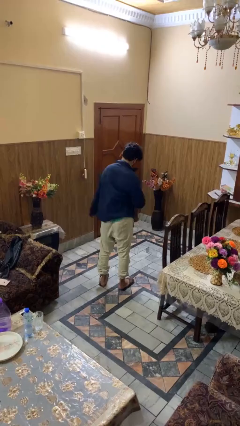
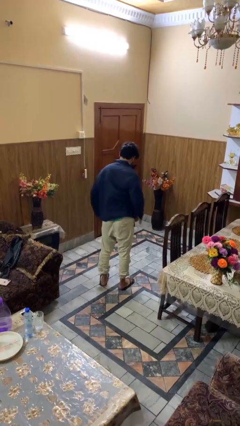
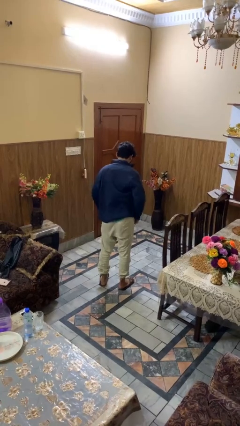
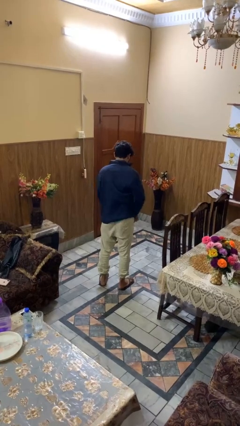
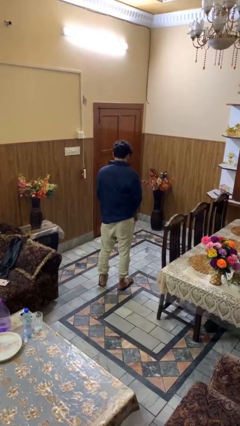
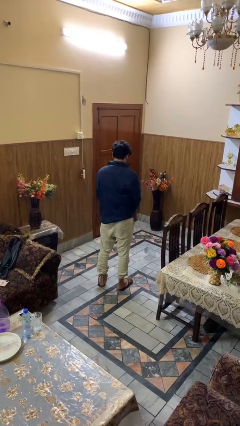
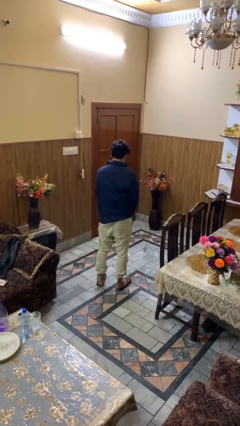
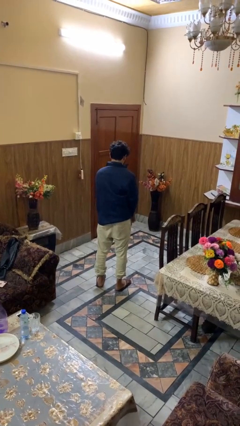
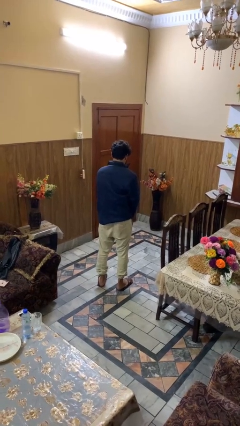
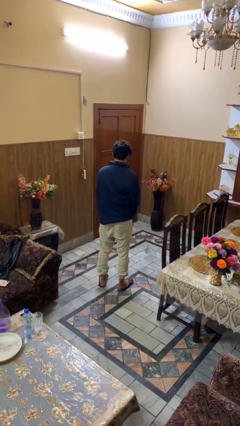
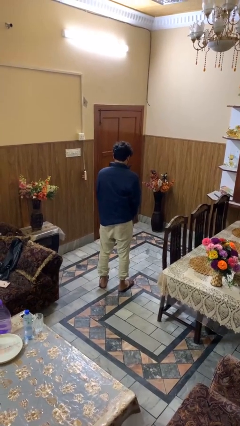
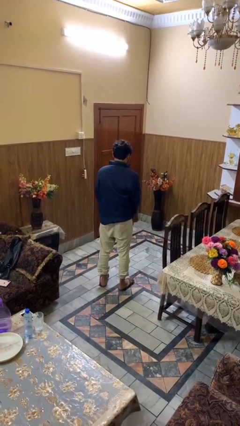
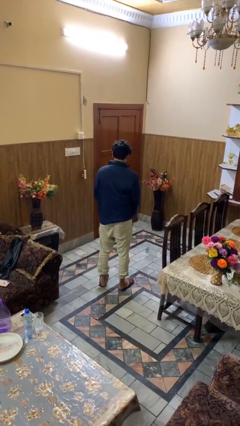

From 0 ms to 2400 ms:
person zips up jacket

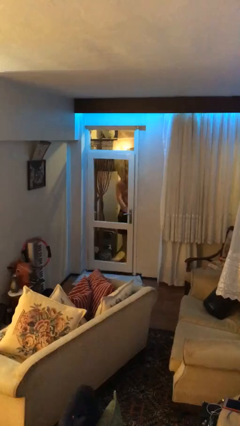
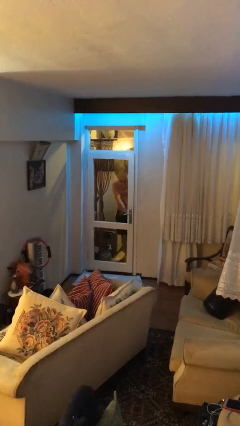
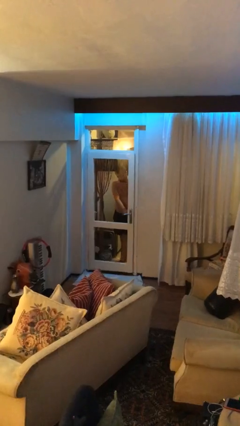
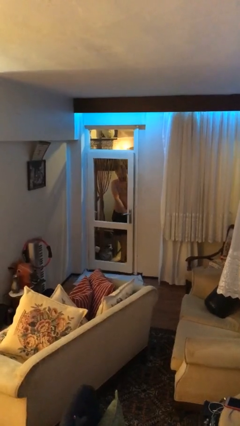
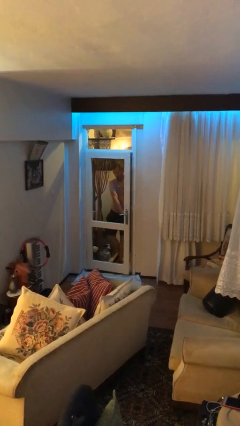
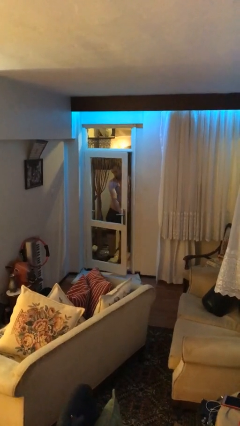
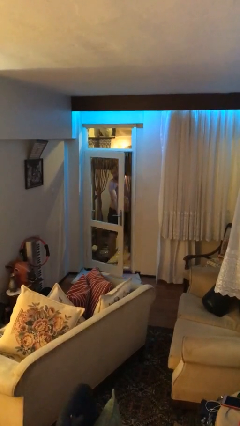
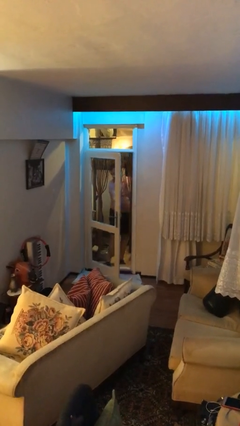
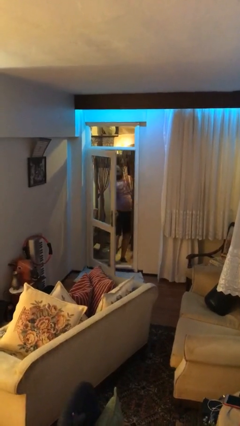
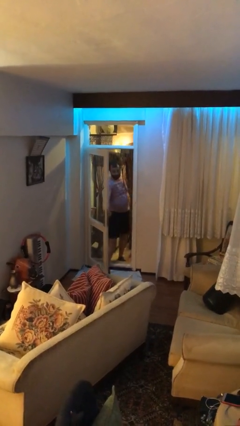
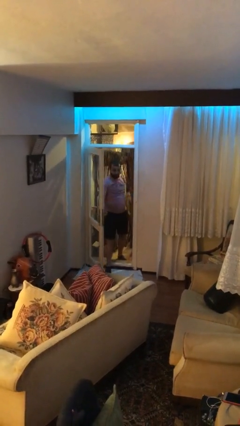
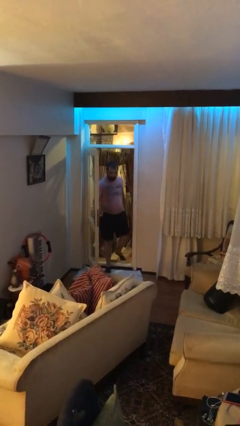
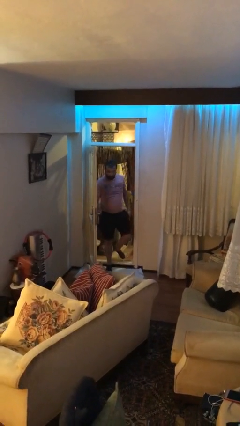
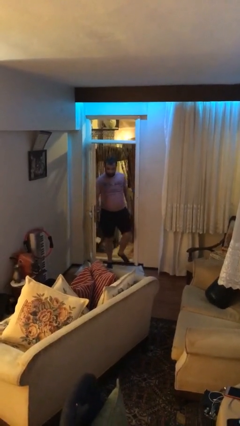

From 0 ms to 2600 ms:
person opens facility door

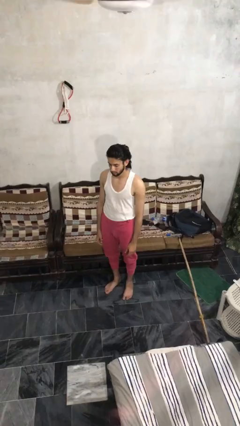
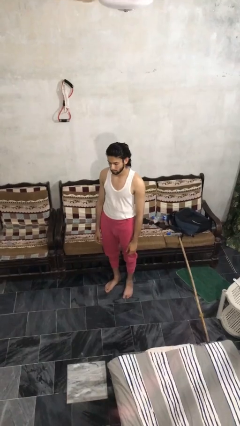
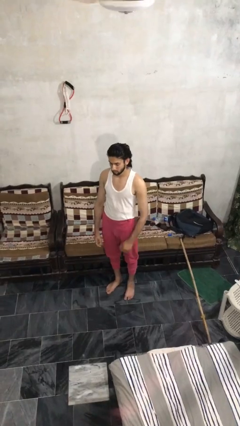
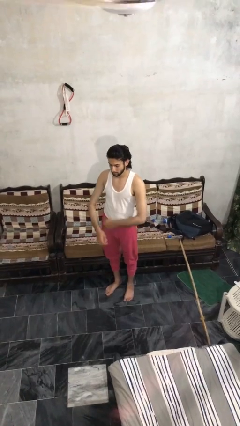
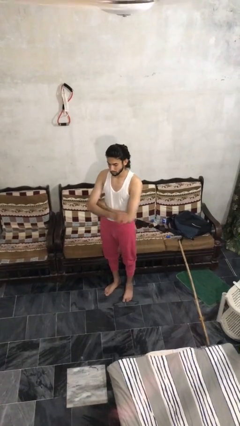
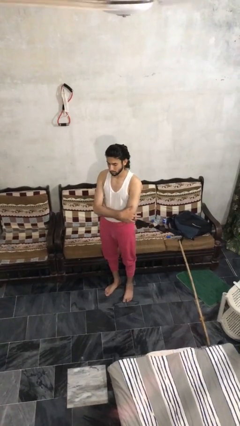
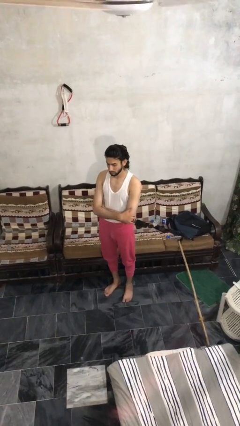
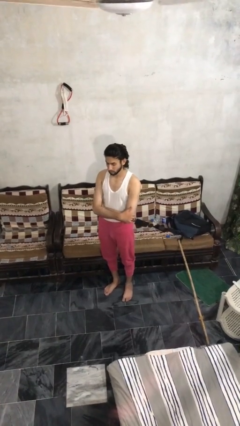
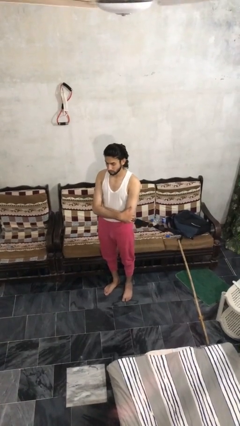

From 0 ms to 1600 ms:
person crosses arms

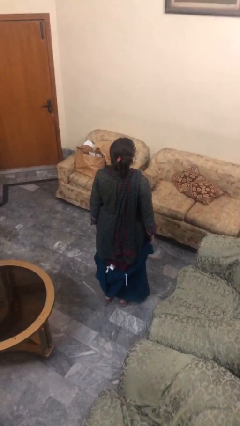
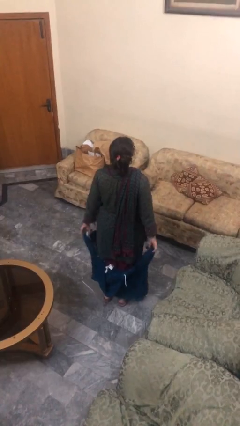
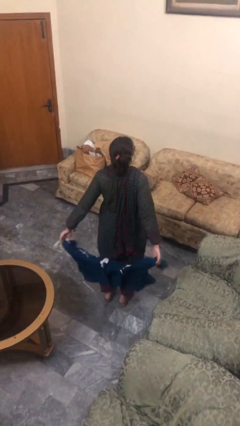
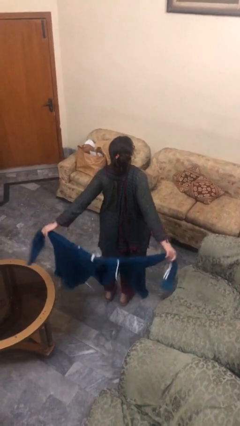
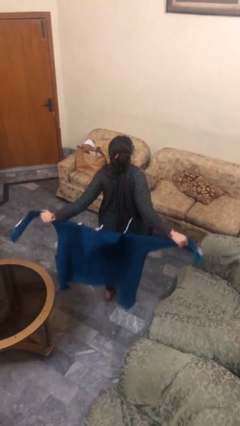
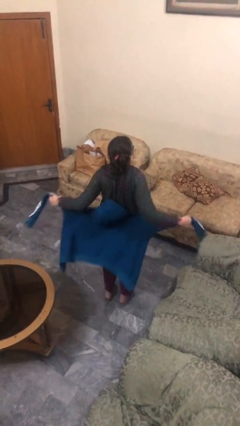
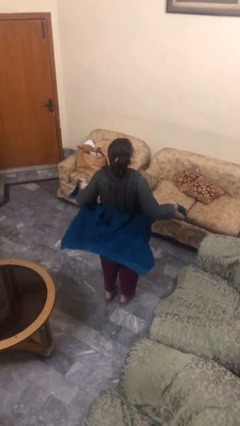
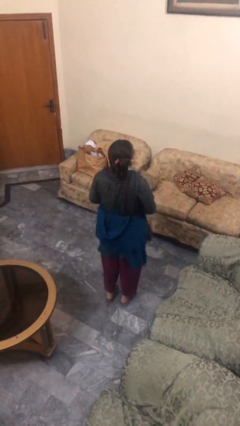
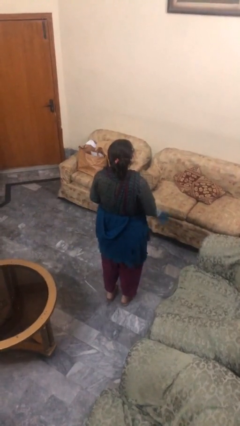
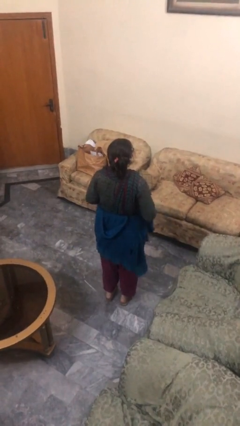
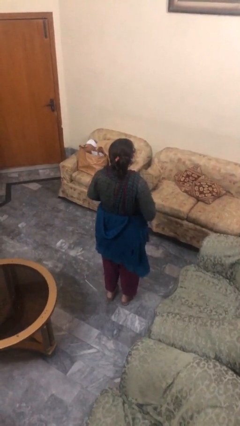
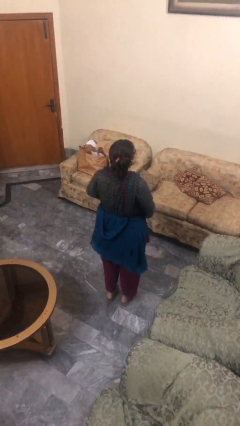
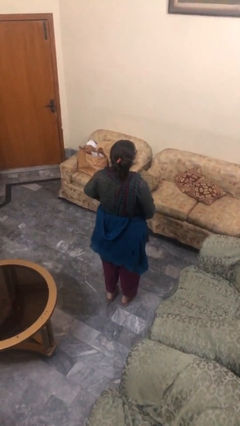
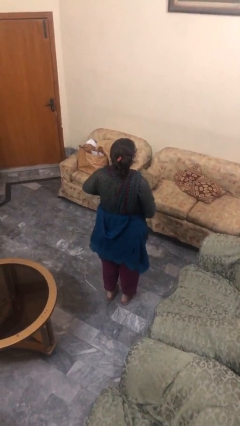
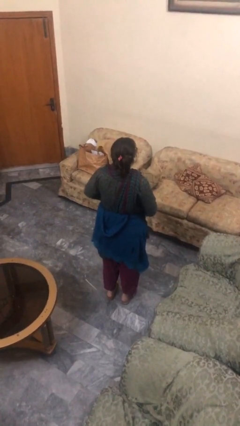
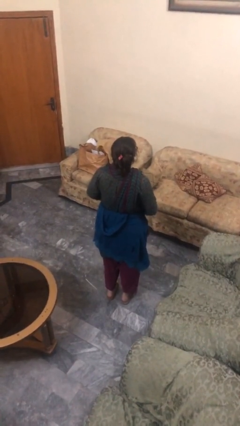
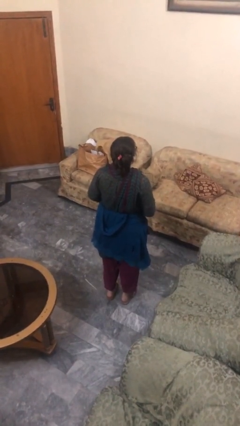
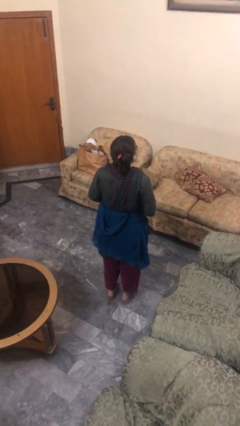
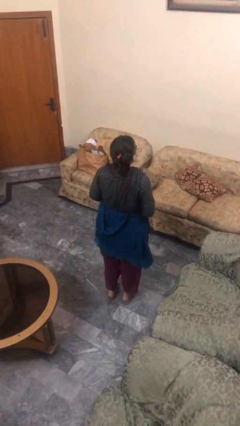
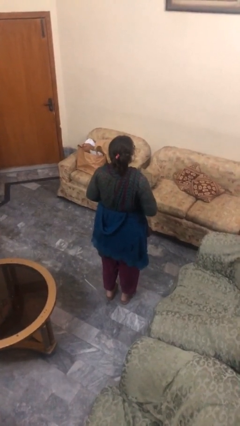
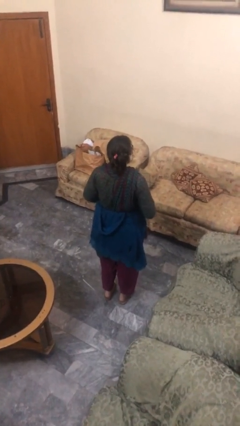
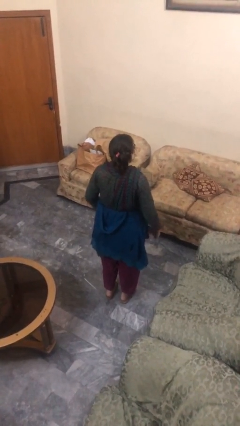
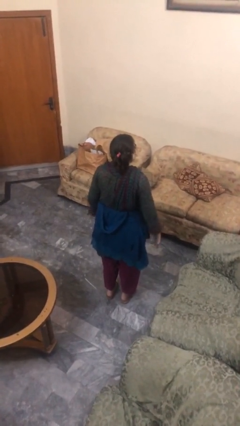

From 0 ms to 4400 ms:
person ties jacket around waist

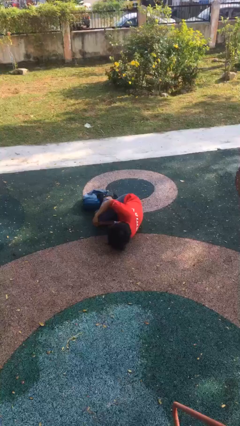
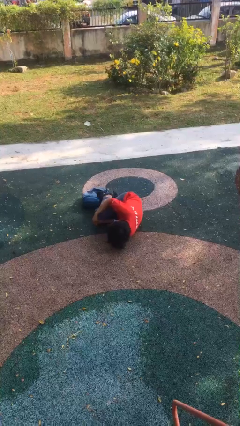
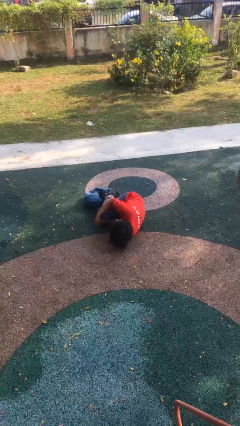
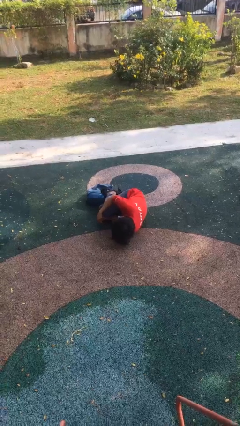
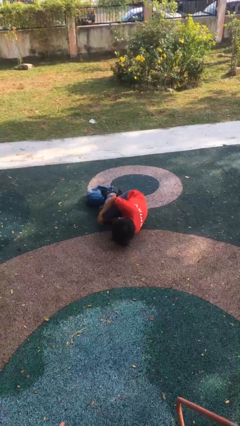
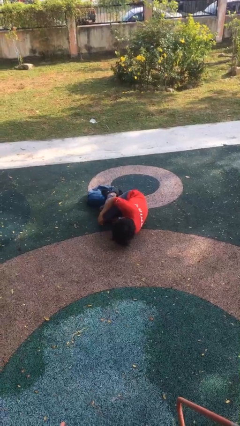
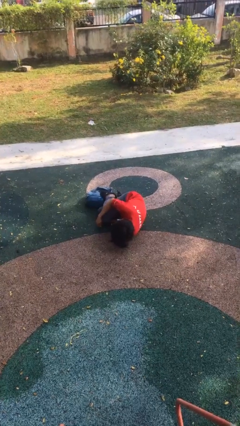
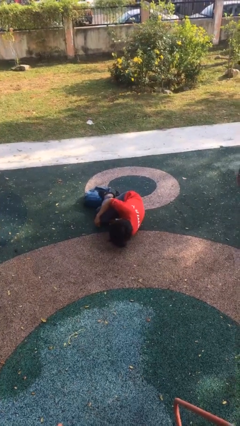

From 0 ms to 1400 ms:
person lies down on floor

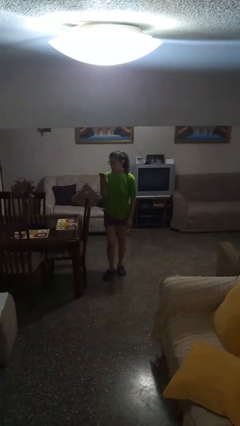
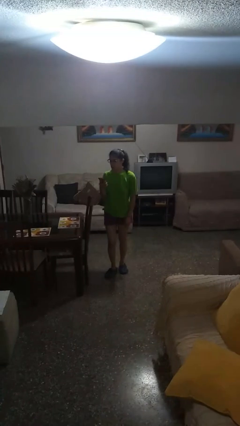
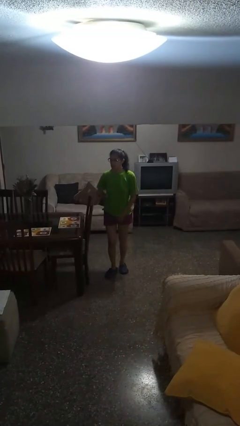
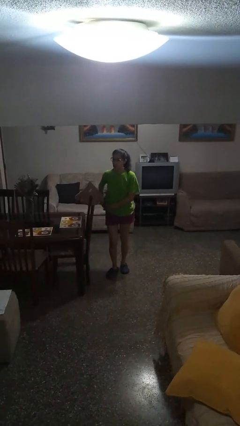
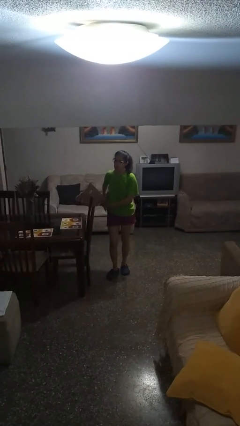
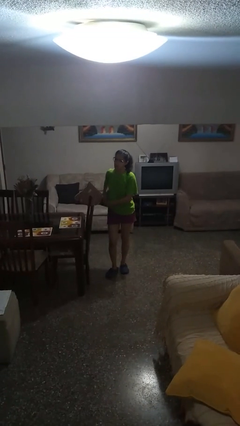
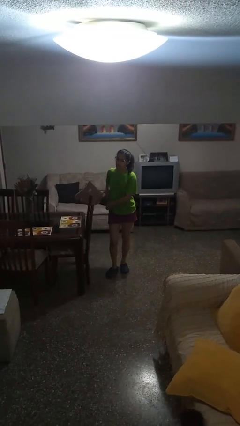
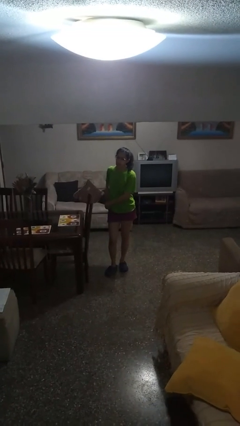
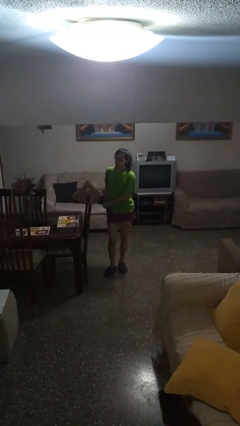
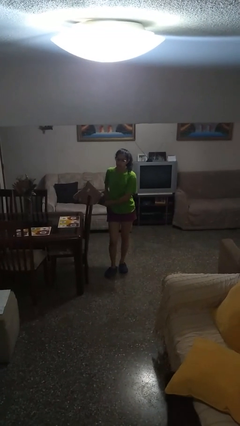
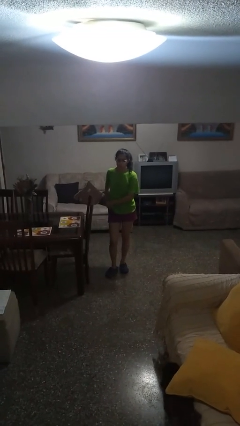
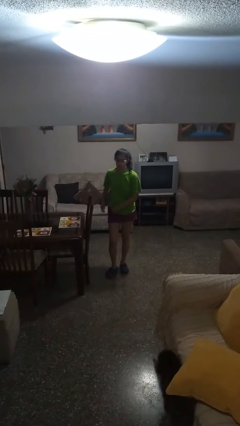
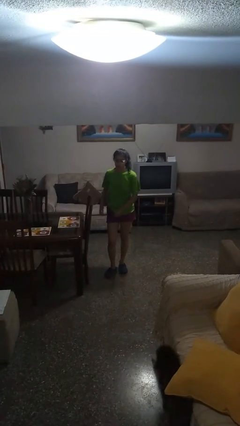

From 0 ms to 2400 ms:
person puts phone into pocket

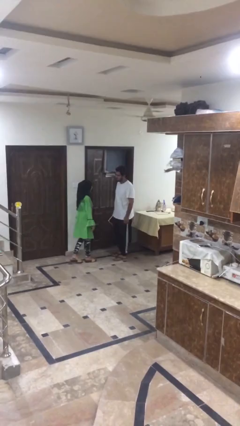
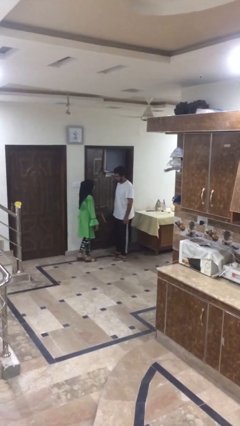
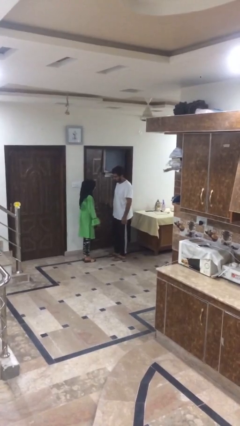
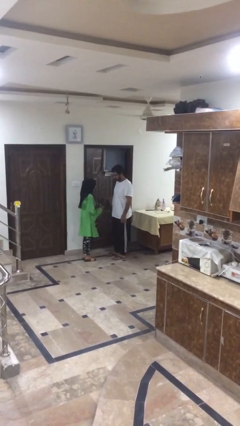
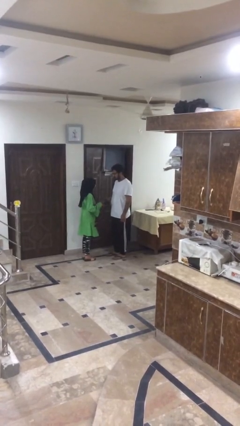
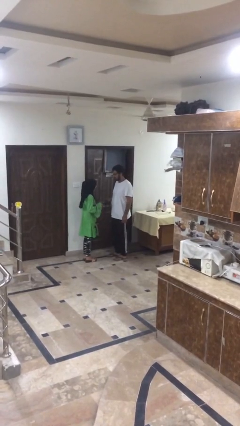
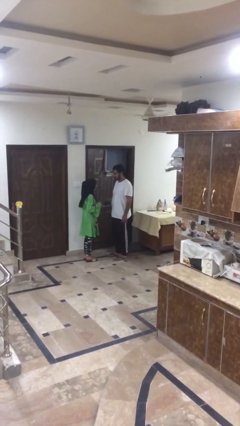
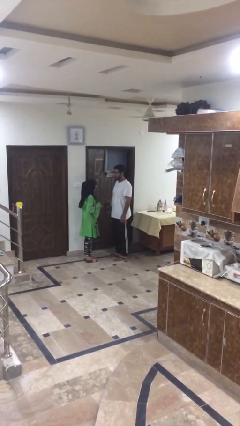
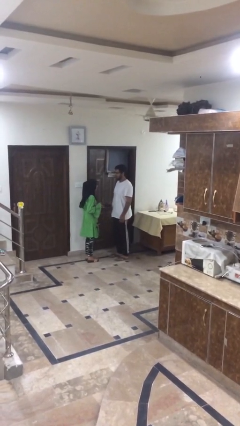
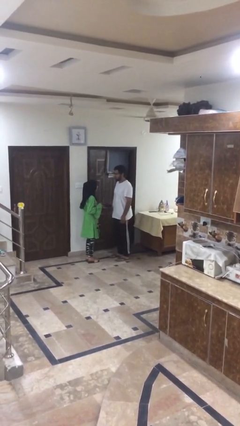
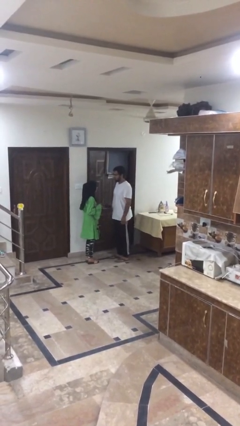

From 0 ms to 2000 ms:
person transfers object to person
